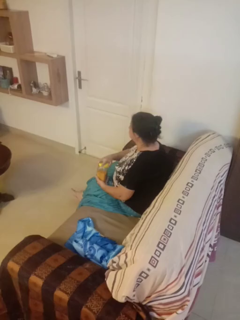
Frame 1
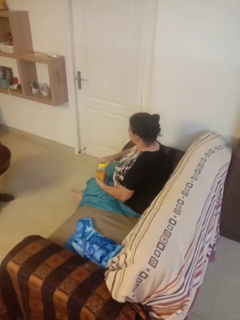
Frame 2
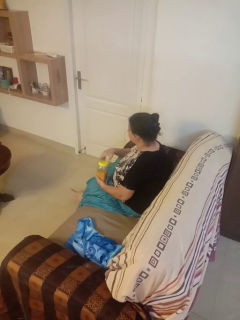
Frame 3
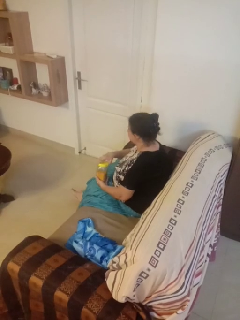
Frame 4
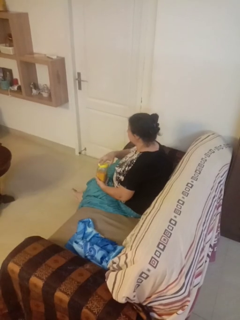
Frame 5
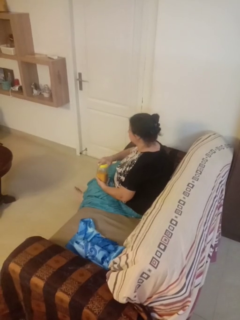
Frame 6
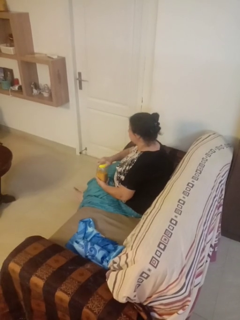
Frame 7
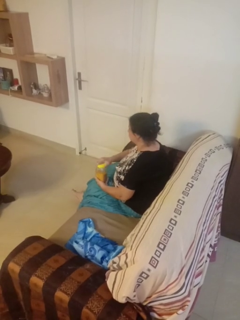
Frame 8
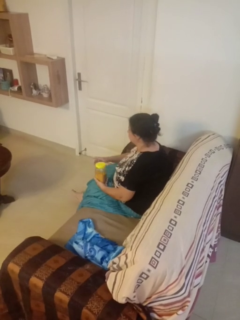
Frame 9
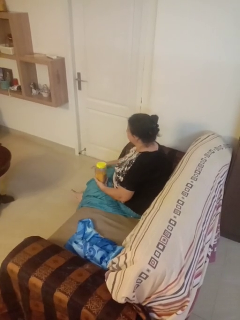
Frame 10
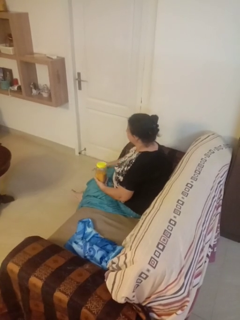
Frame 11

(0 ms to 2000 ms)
person closes jar

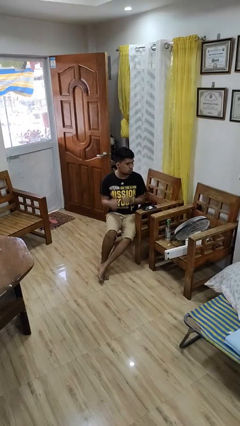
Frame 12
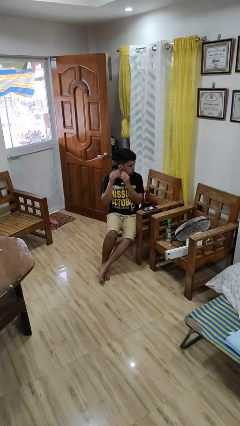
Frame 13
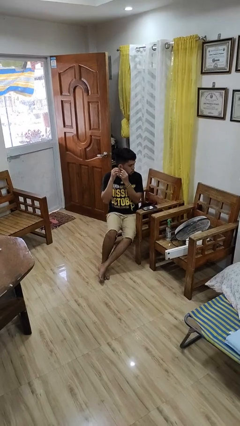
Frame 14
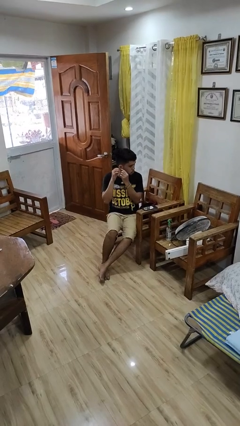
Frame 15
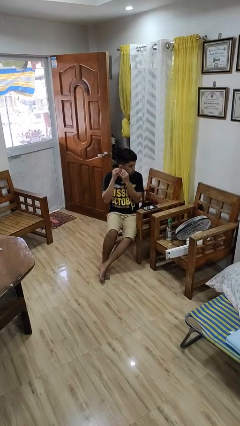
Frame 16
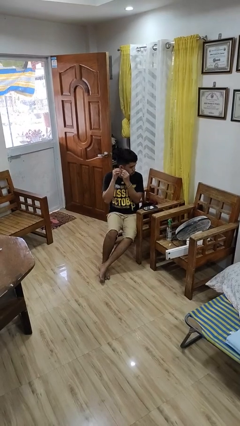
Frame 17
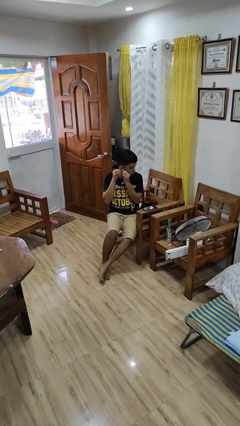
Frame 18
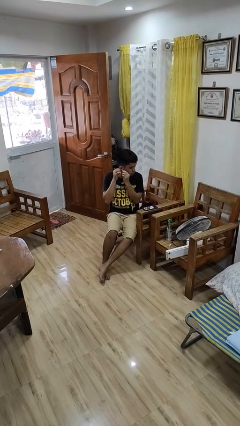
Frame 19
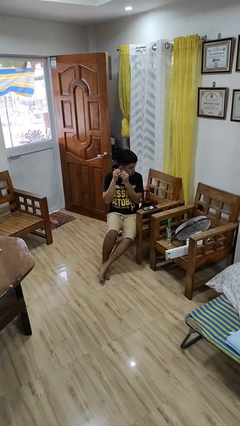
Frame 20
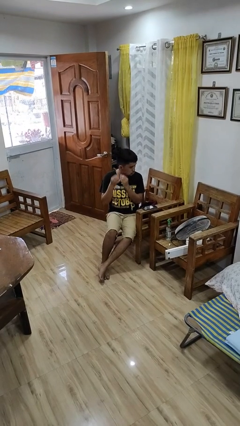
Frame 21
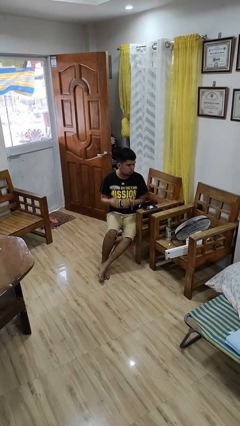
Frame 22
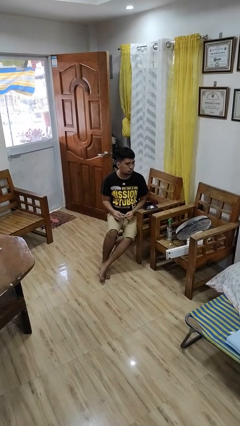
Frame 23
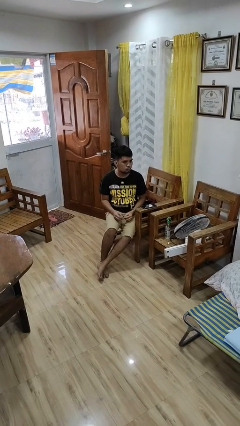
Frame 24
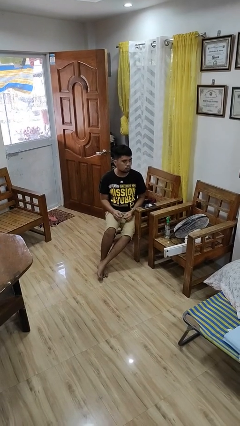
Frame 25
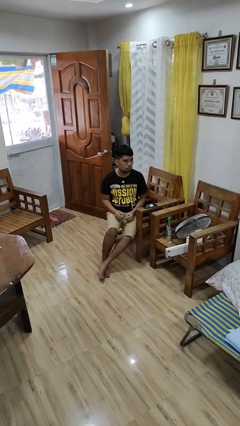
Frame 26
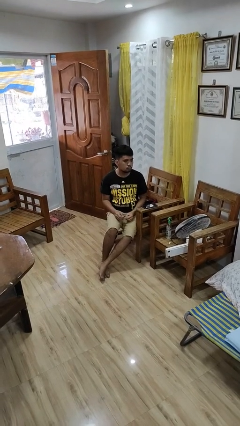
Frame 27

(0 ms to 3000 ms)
person takes off earrings

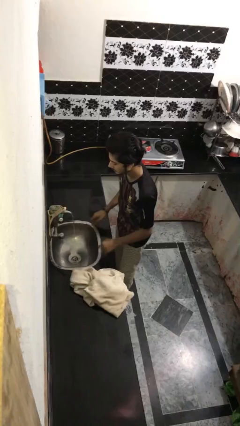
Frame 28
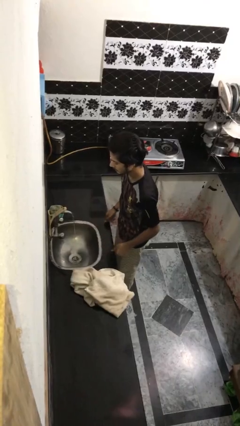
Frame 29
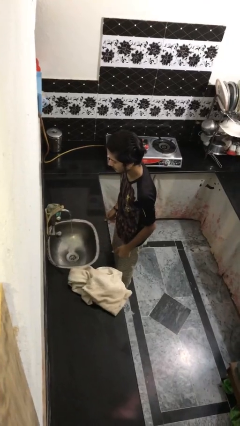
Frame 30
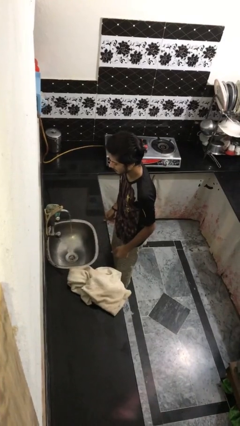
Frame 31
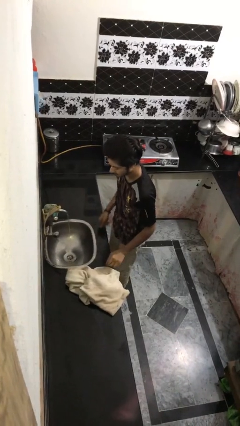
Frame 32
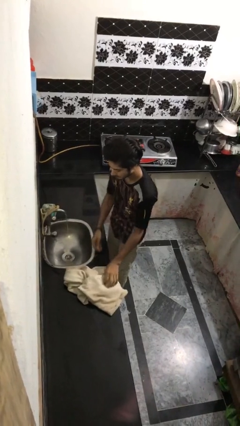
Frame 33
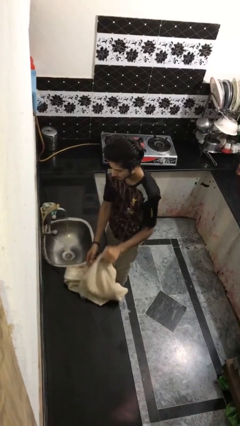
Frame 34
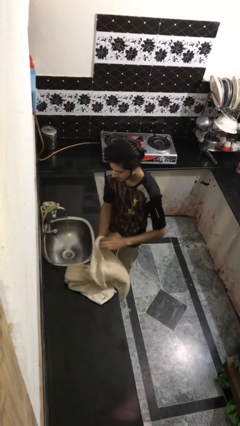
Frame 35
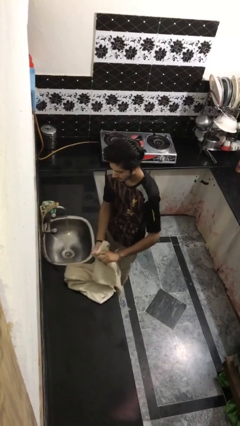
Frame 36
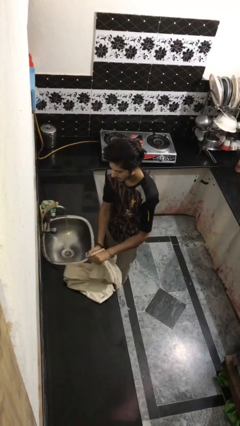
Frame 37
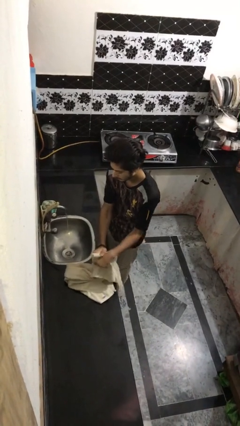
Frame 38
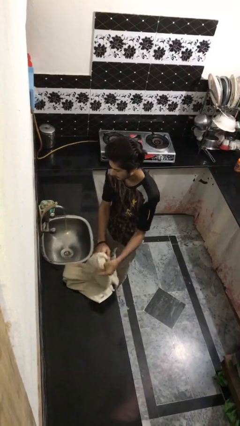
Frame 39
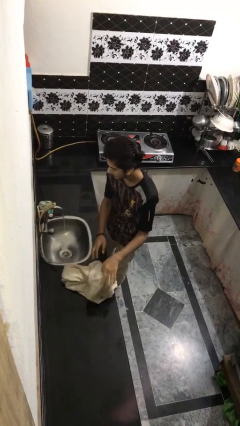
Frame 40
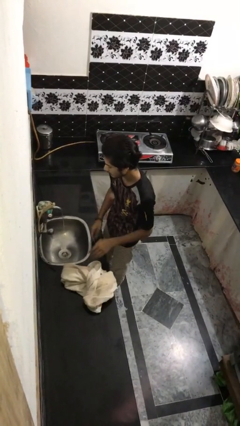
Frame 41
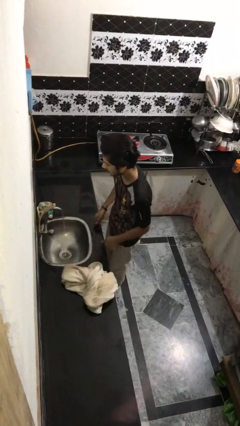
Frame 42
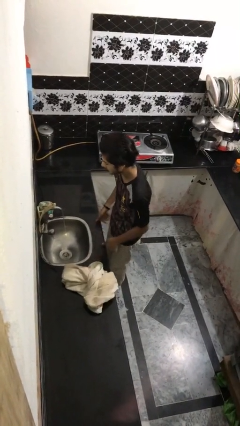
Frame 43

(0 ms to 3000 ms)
person dries face with towel

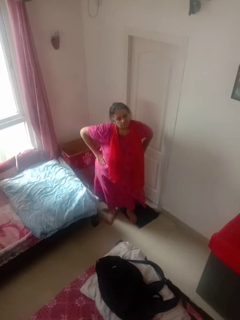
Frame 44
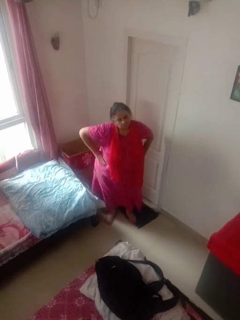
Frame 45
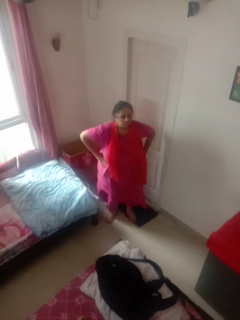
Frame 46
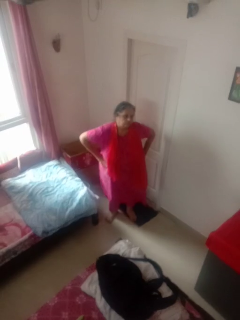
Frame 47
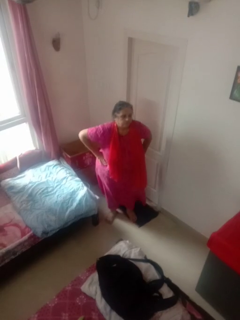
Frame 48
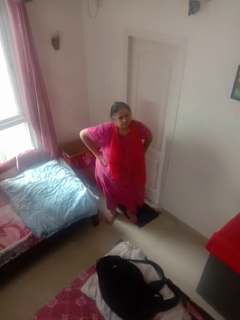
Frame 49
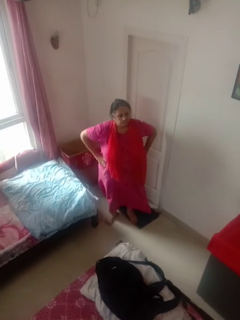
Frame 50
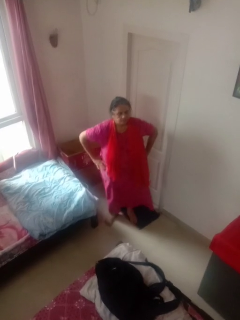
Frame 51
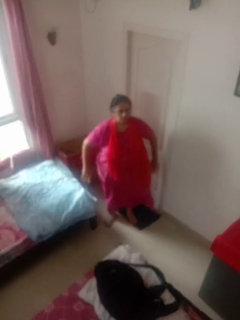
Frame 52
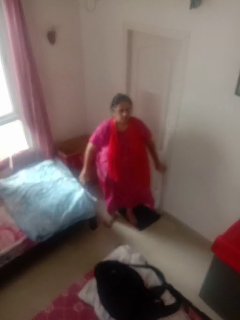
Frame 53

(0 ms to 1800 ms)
person wiggles hips

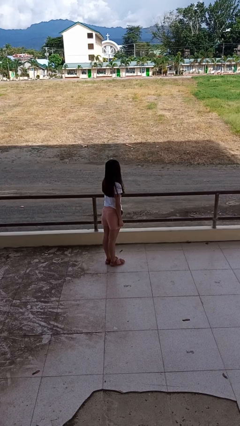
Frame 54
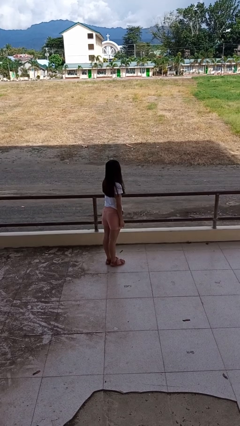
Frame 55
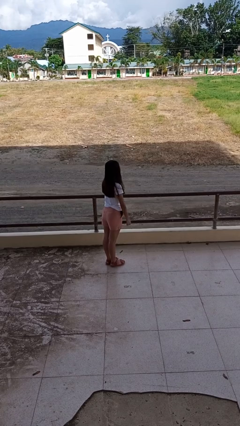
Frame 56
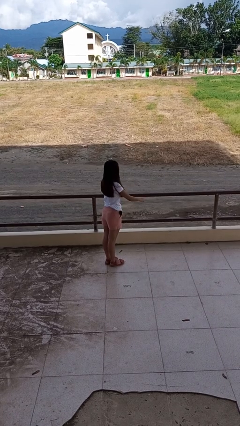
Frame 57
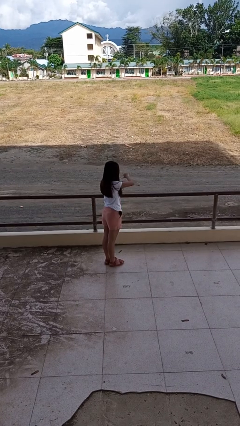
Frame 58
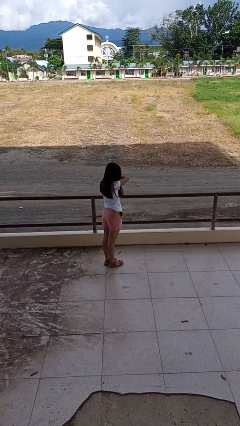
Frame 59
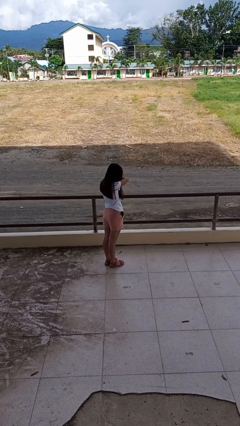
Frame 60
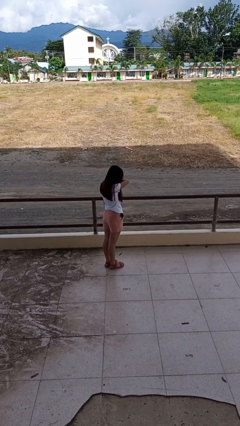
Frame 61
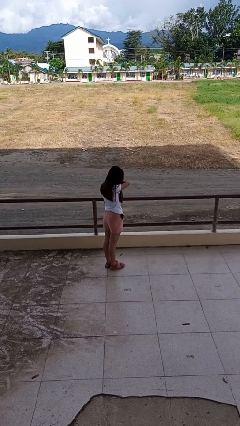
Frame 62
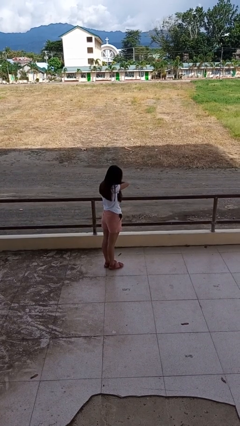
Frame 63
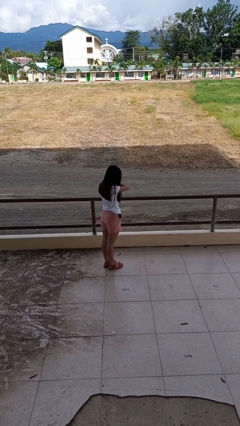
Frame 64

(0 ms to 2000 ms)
person sneezes into arm

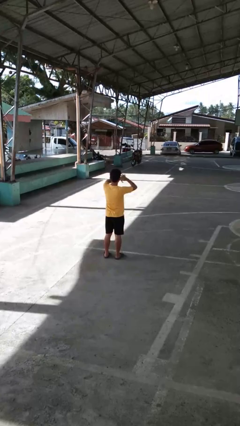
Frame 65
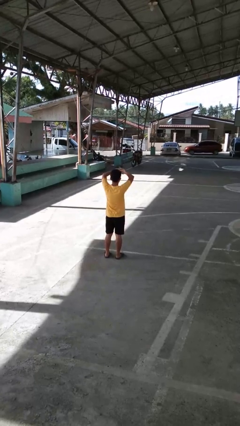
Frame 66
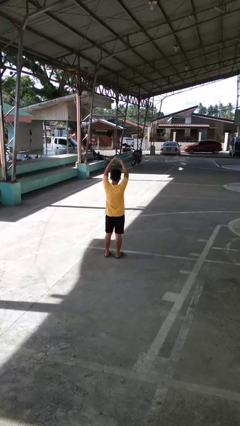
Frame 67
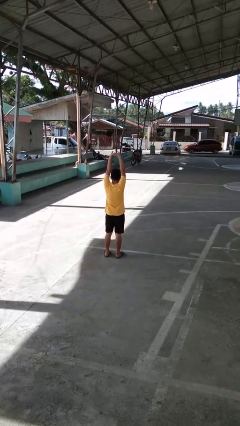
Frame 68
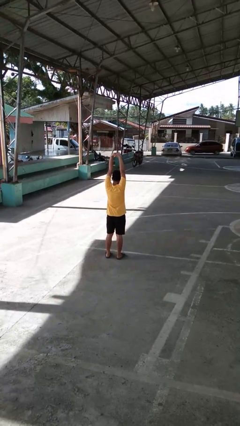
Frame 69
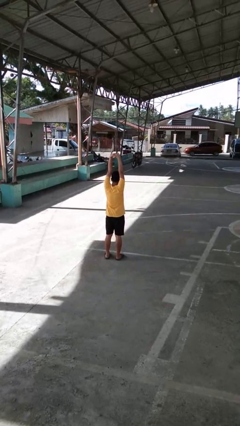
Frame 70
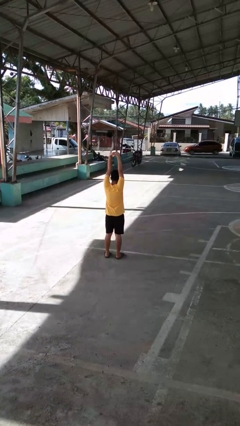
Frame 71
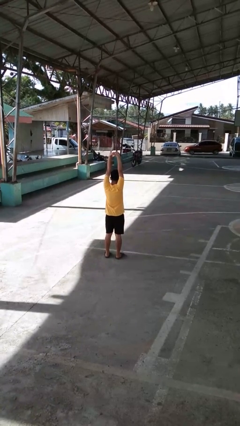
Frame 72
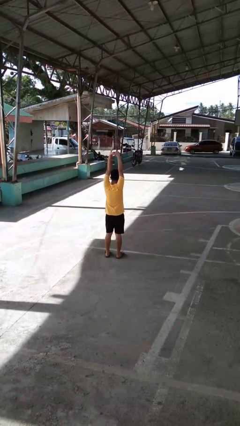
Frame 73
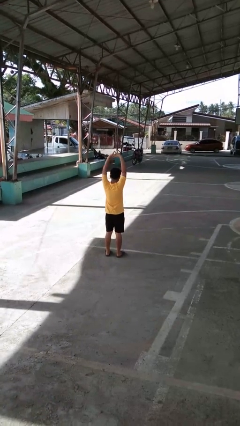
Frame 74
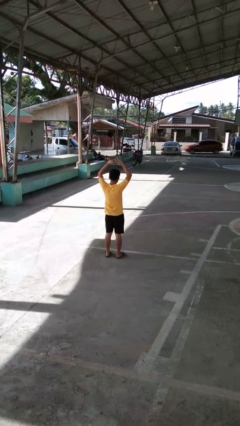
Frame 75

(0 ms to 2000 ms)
person stretches arms over head

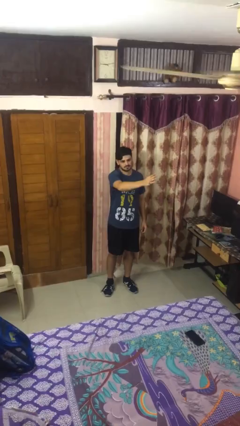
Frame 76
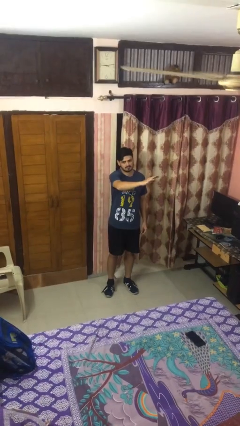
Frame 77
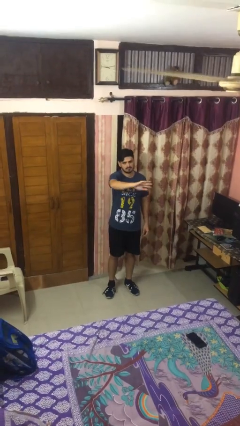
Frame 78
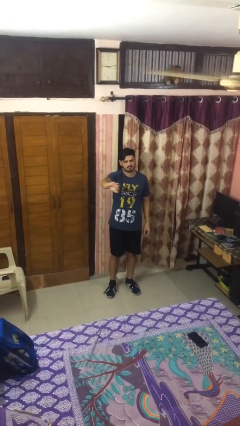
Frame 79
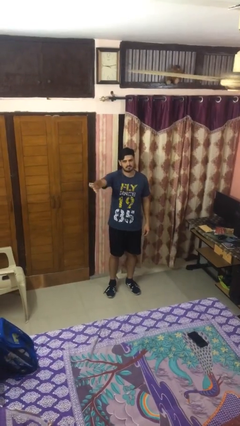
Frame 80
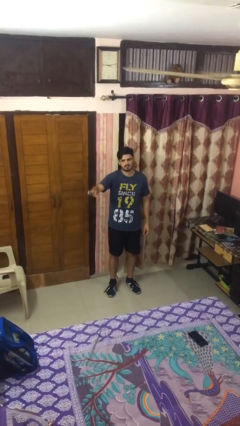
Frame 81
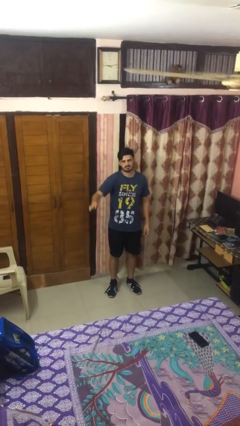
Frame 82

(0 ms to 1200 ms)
person gestures swipe right

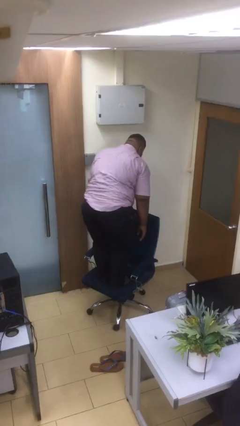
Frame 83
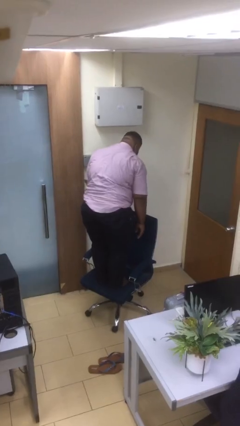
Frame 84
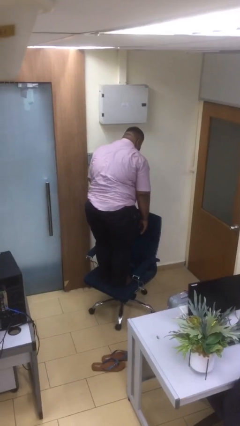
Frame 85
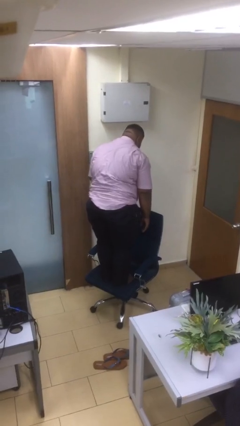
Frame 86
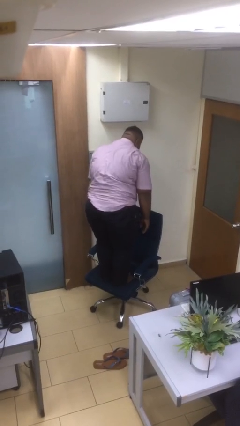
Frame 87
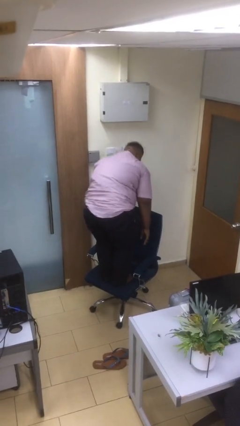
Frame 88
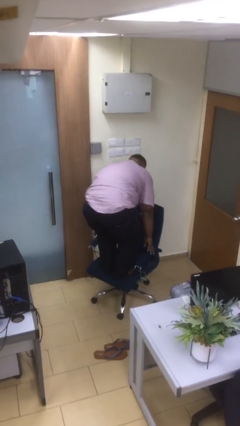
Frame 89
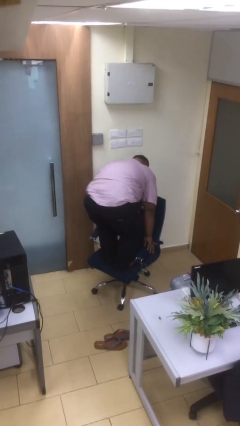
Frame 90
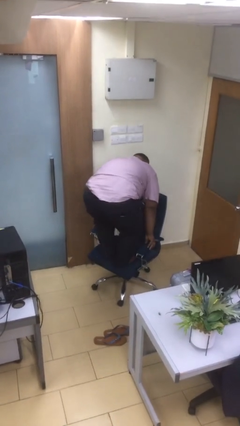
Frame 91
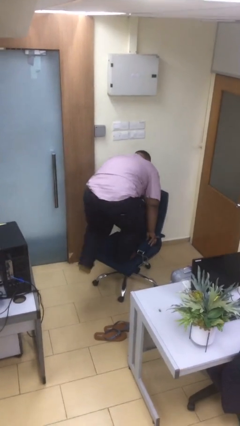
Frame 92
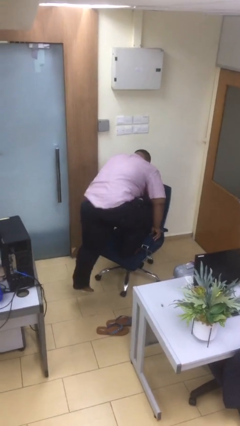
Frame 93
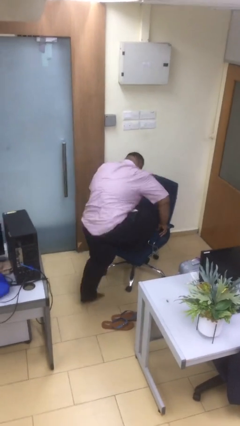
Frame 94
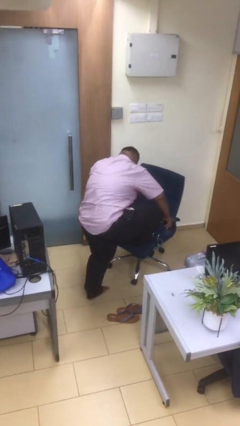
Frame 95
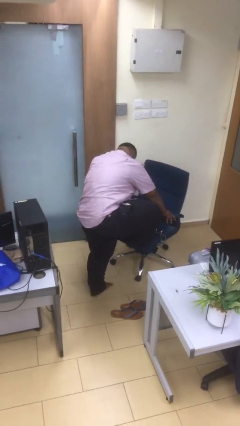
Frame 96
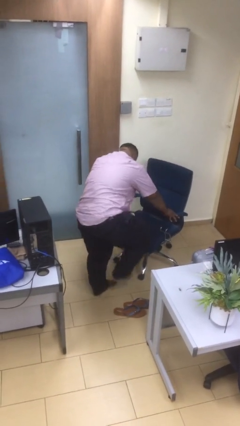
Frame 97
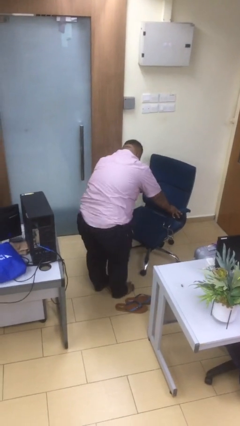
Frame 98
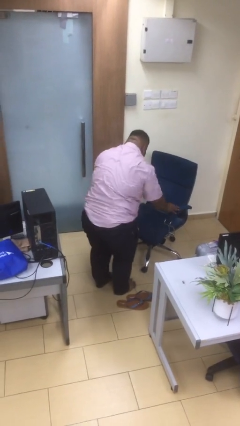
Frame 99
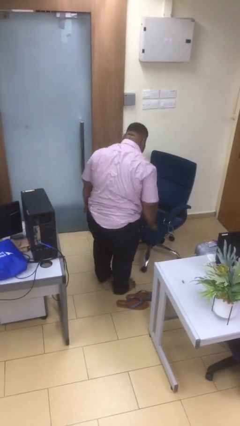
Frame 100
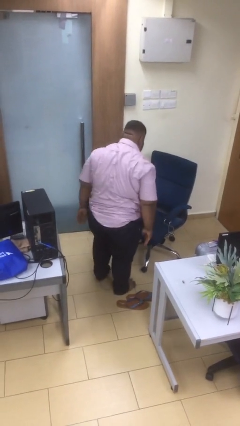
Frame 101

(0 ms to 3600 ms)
person climbs off chair
